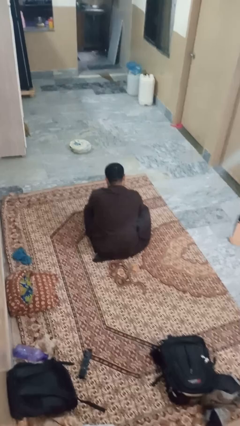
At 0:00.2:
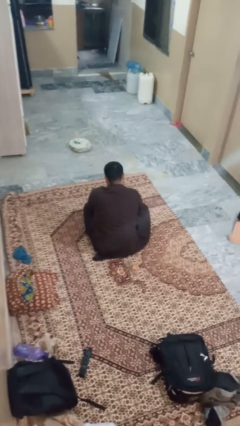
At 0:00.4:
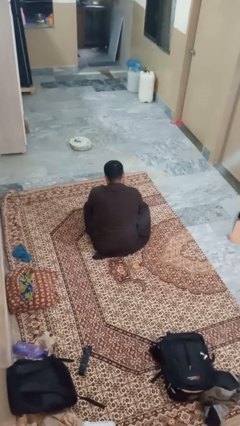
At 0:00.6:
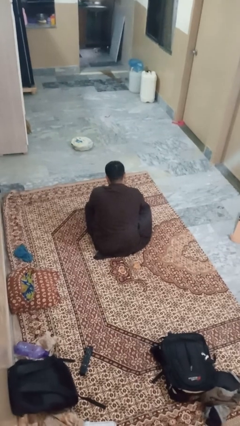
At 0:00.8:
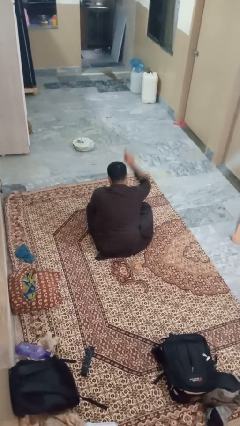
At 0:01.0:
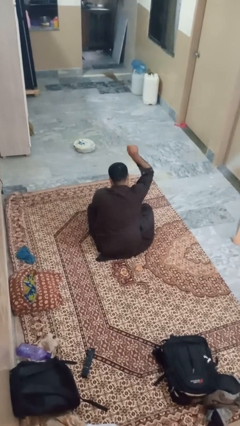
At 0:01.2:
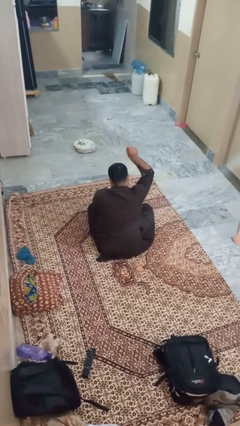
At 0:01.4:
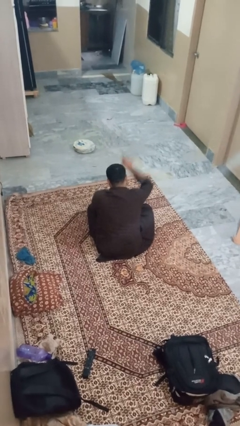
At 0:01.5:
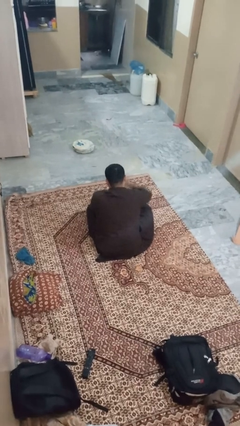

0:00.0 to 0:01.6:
person gestures number one

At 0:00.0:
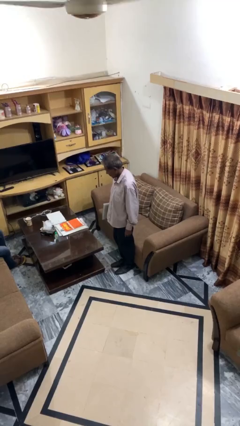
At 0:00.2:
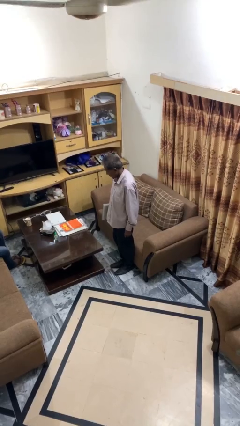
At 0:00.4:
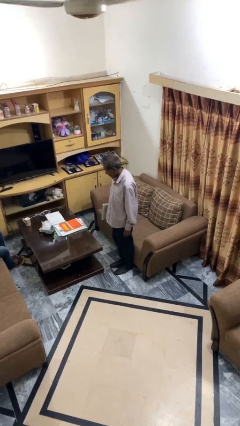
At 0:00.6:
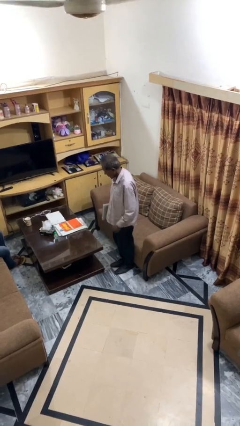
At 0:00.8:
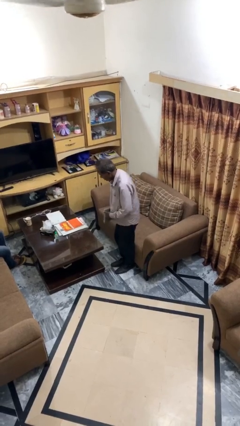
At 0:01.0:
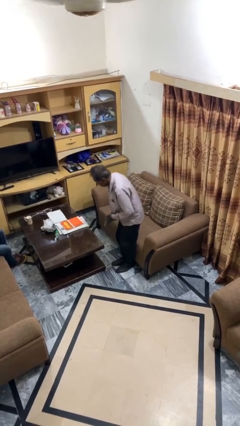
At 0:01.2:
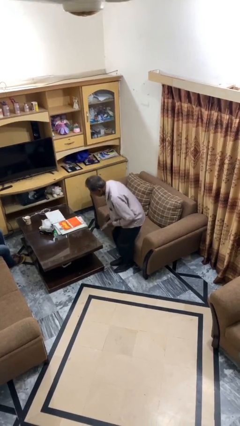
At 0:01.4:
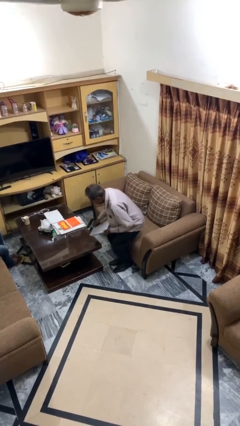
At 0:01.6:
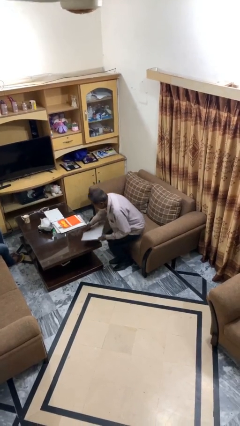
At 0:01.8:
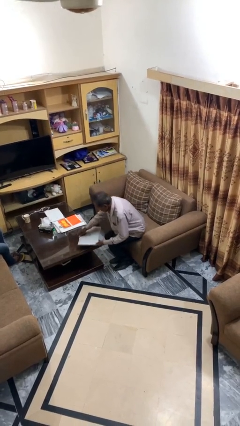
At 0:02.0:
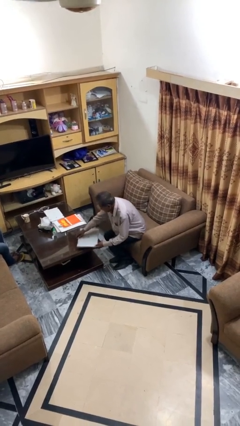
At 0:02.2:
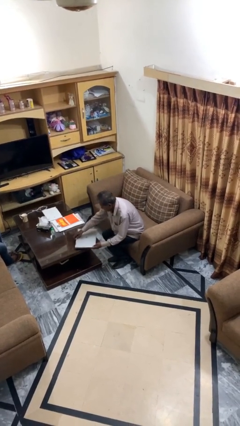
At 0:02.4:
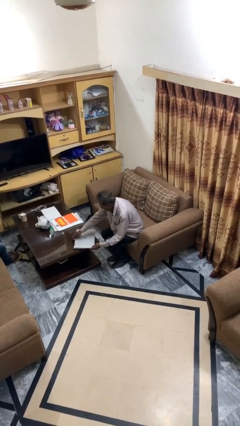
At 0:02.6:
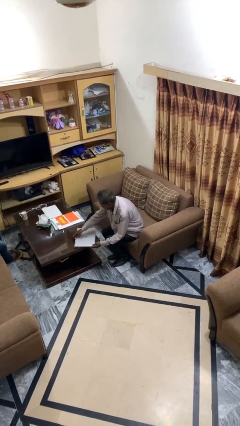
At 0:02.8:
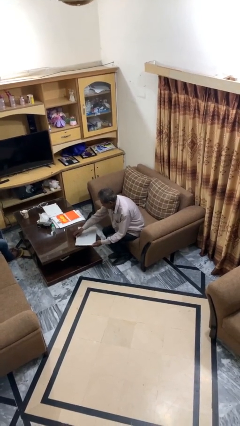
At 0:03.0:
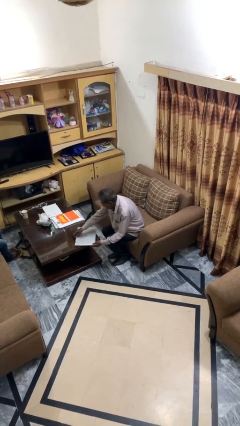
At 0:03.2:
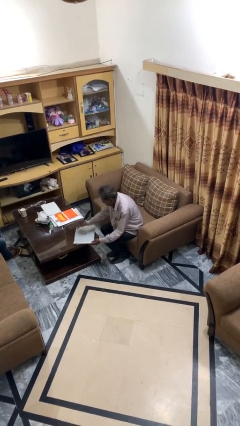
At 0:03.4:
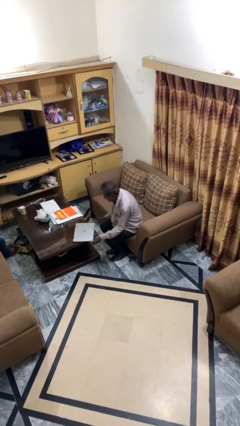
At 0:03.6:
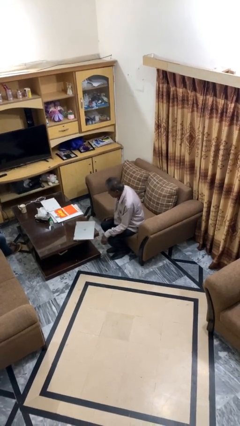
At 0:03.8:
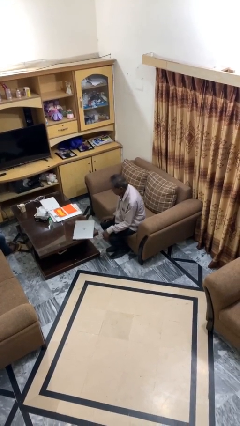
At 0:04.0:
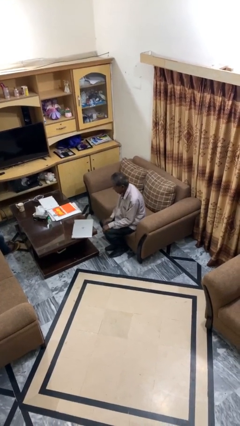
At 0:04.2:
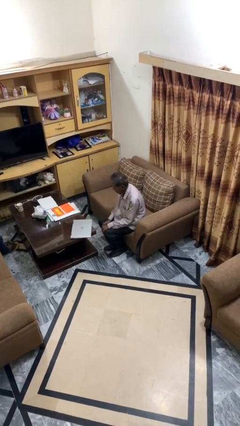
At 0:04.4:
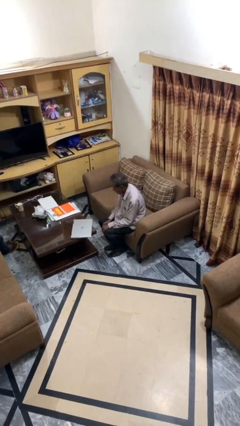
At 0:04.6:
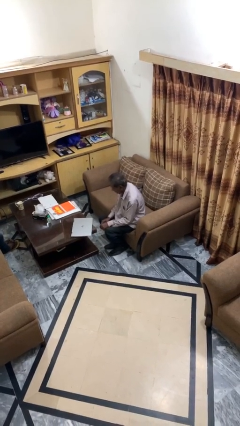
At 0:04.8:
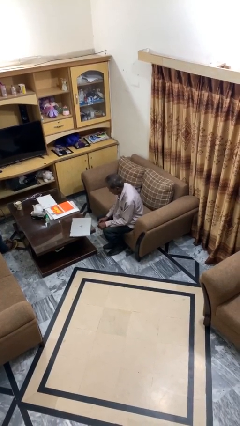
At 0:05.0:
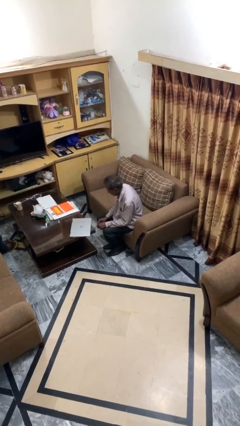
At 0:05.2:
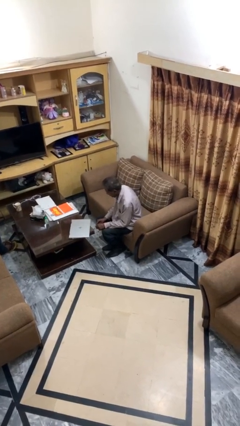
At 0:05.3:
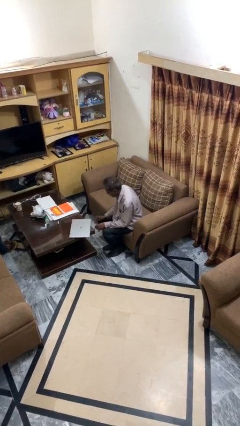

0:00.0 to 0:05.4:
person sits down

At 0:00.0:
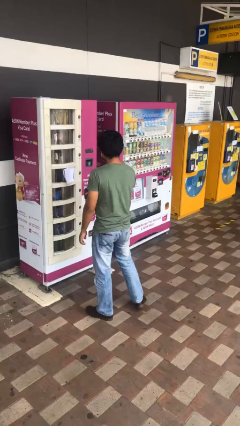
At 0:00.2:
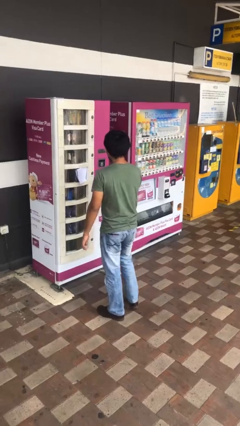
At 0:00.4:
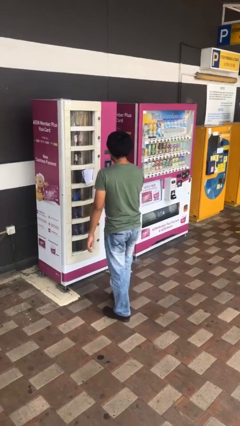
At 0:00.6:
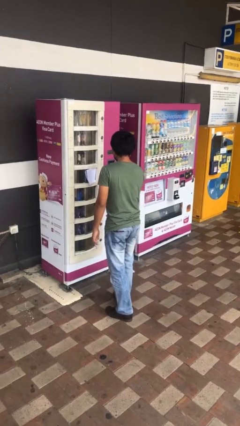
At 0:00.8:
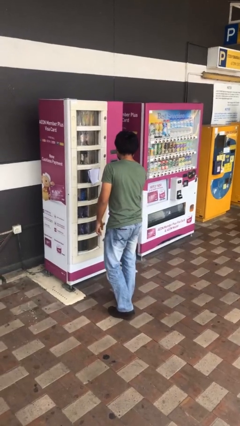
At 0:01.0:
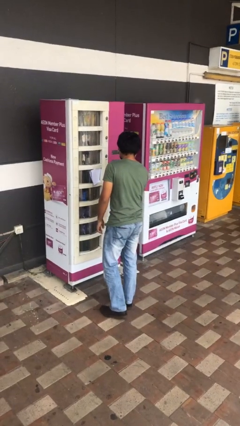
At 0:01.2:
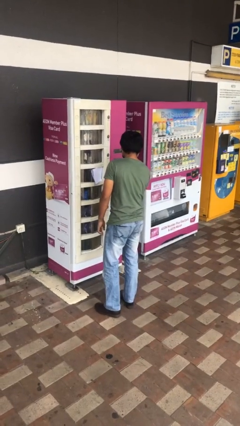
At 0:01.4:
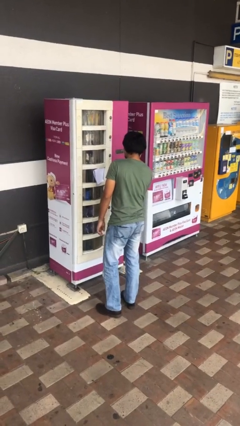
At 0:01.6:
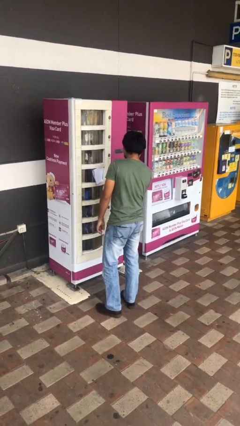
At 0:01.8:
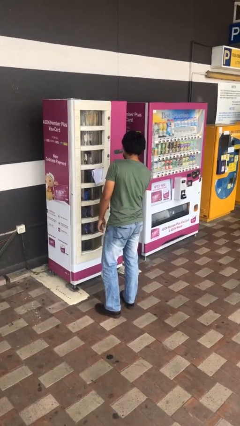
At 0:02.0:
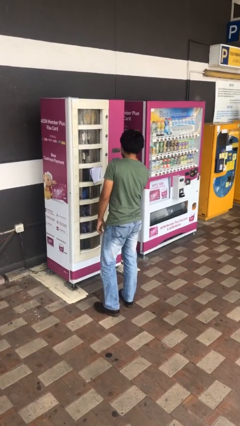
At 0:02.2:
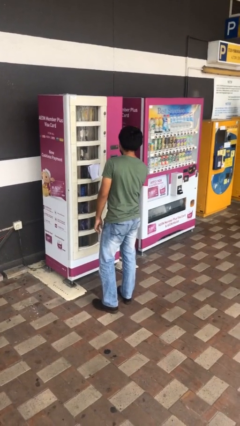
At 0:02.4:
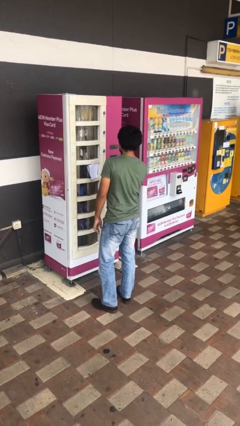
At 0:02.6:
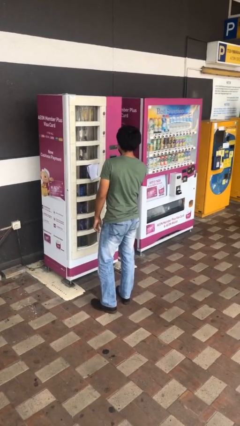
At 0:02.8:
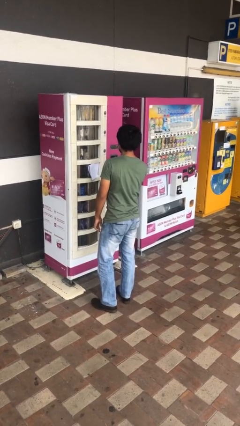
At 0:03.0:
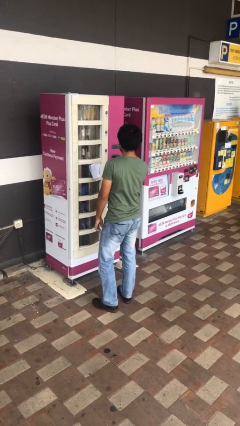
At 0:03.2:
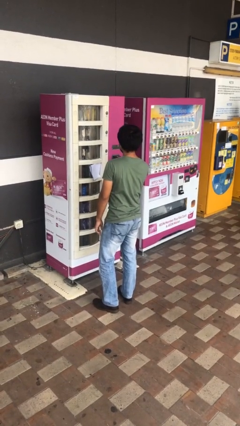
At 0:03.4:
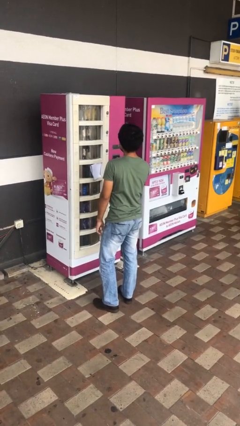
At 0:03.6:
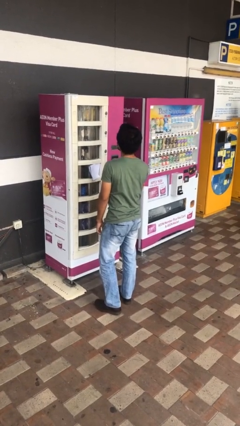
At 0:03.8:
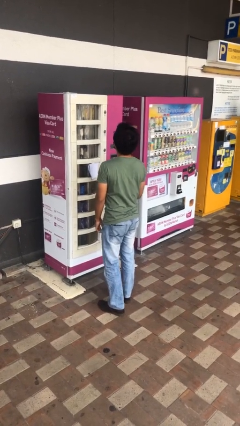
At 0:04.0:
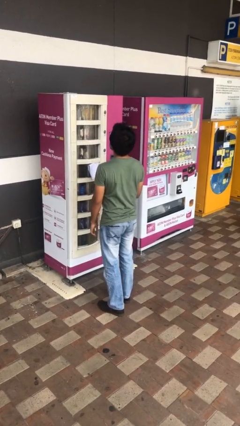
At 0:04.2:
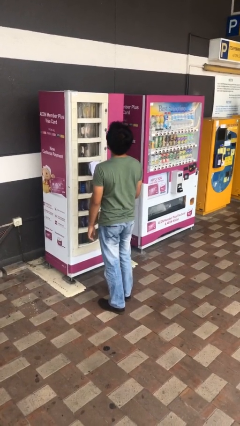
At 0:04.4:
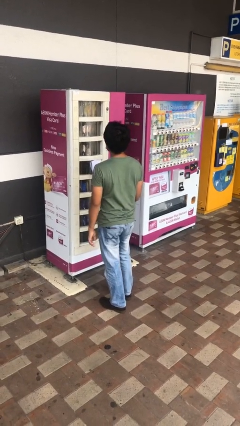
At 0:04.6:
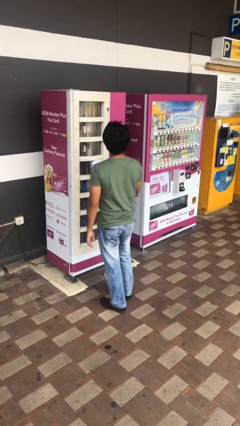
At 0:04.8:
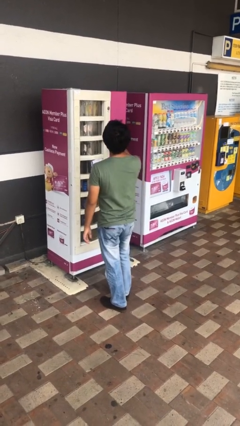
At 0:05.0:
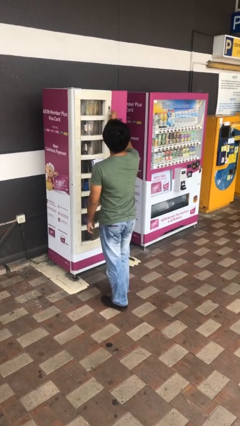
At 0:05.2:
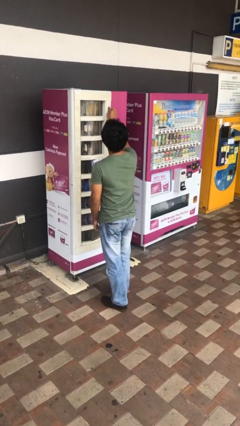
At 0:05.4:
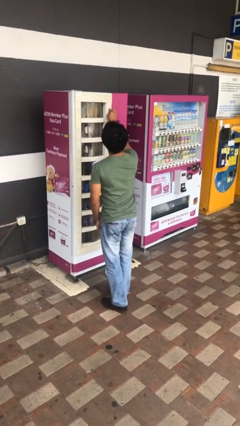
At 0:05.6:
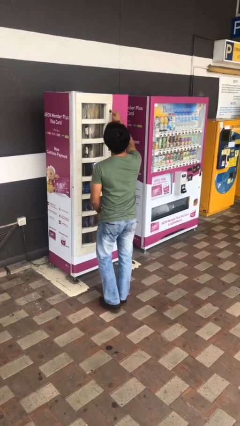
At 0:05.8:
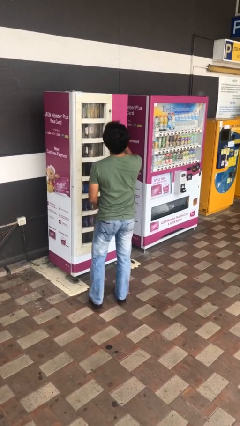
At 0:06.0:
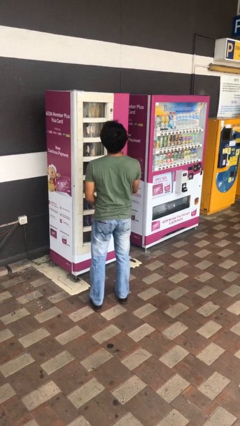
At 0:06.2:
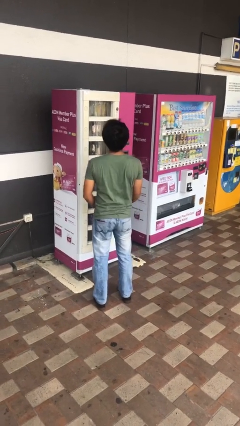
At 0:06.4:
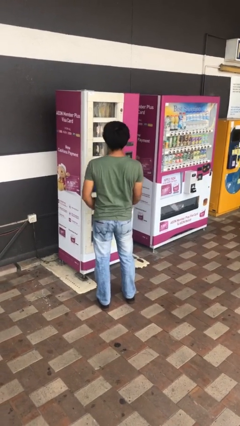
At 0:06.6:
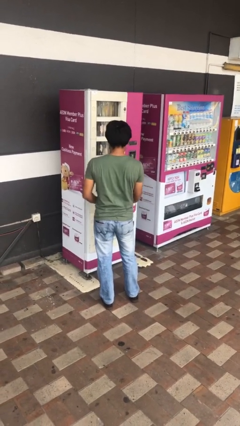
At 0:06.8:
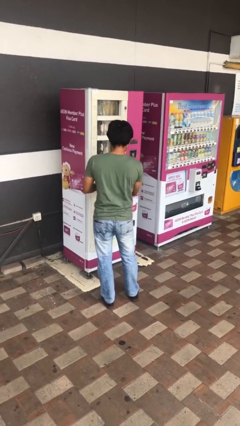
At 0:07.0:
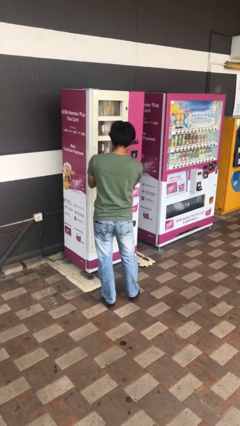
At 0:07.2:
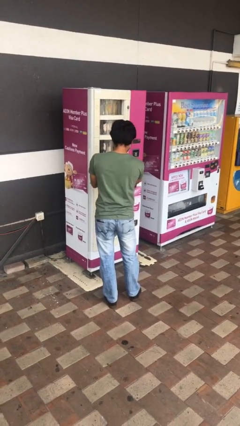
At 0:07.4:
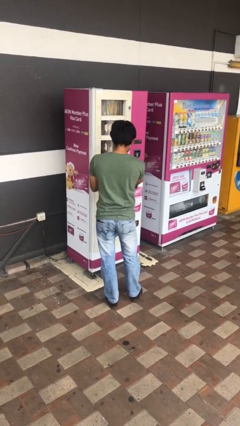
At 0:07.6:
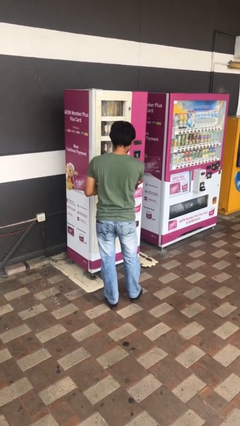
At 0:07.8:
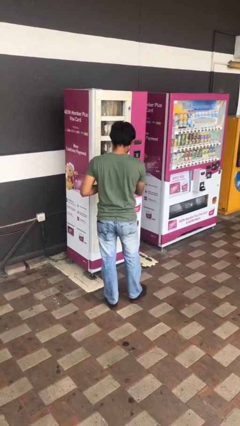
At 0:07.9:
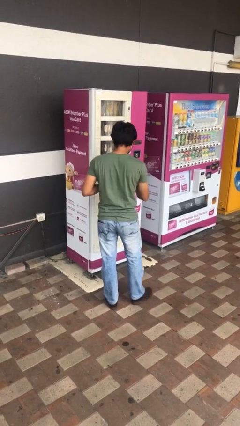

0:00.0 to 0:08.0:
person purchases from machine

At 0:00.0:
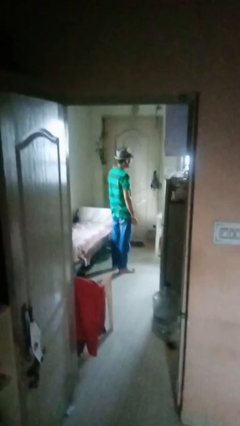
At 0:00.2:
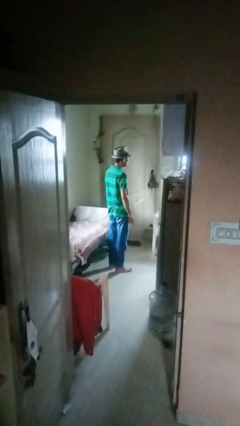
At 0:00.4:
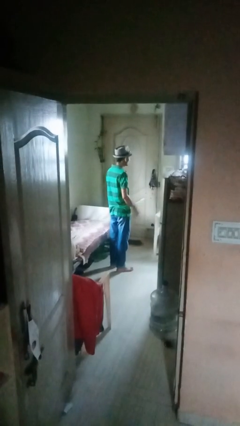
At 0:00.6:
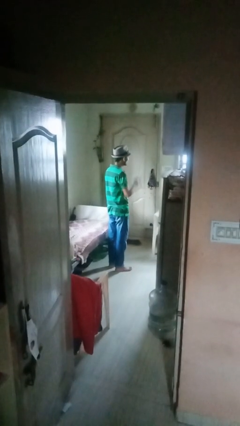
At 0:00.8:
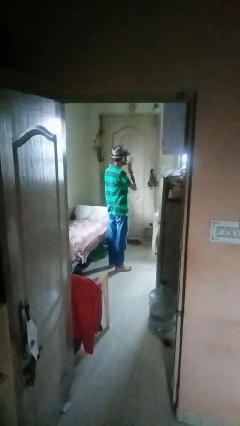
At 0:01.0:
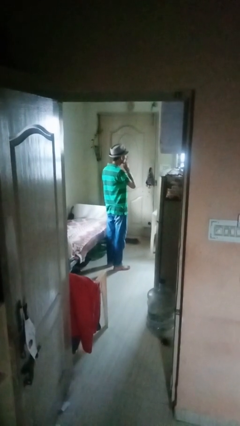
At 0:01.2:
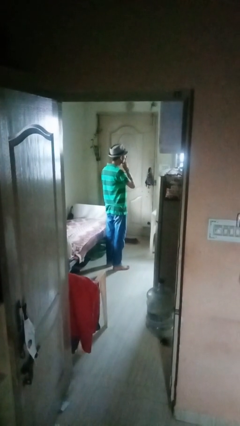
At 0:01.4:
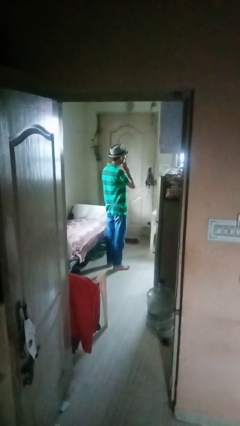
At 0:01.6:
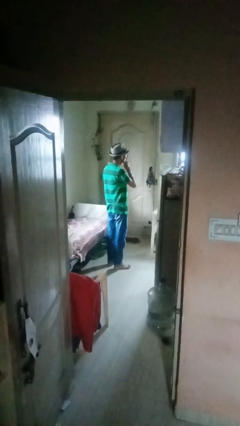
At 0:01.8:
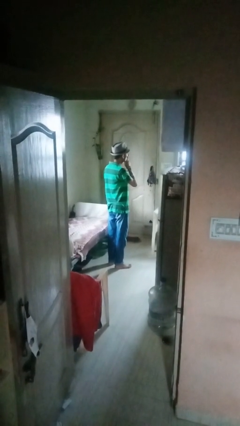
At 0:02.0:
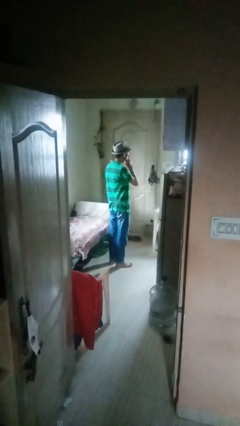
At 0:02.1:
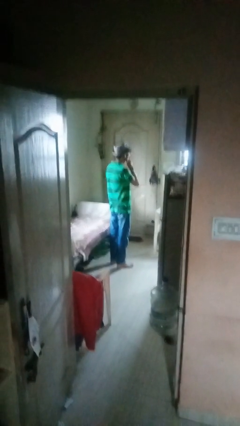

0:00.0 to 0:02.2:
person gestures be quiet

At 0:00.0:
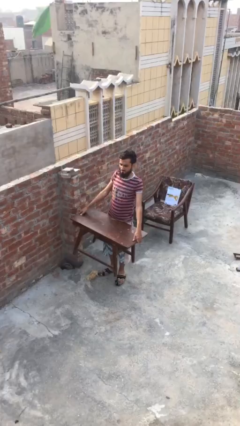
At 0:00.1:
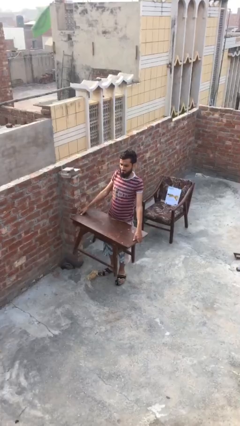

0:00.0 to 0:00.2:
person carries heavy object
